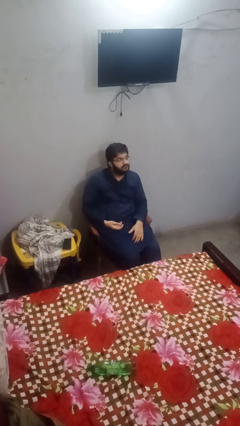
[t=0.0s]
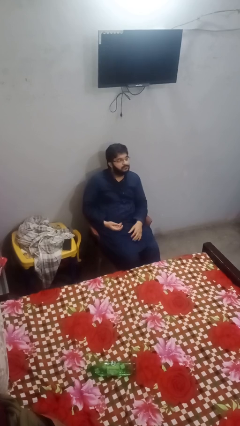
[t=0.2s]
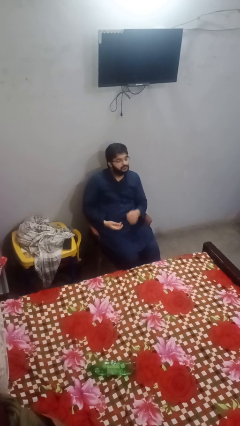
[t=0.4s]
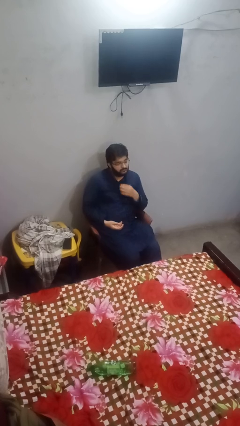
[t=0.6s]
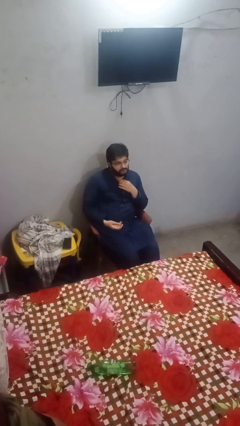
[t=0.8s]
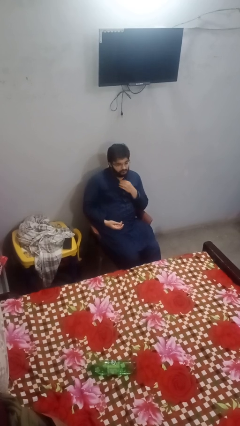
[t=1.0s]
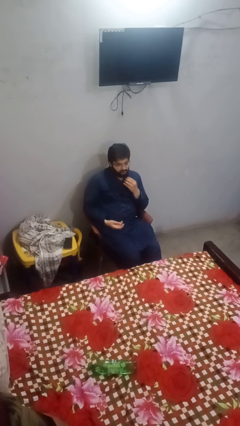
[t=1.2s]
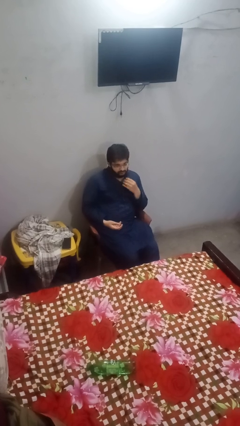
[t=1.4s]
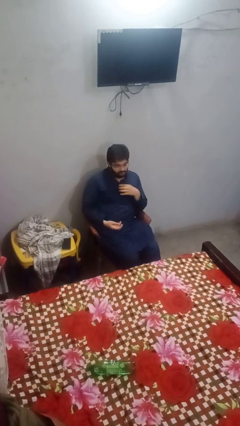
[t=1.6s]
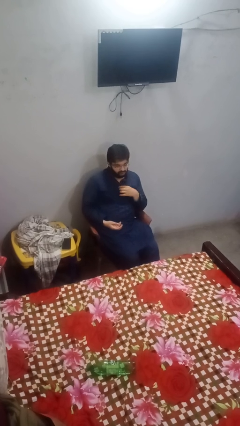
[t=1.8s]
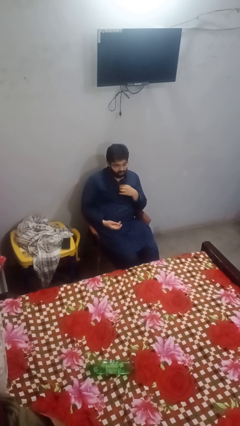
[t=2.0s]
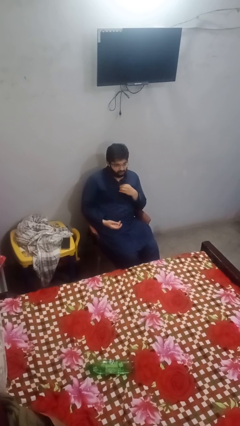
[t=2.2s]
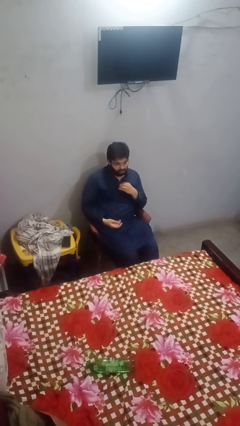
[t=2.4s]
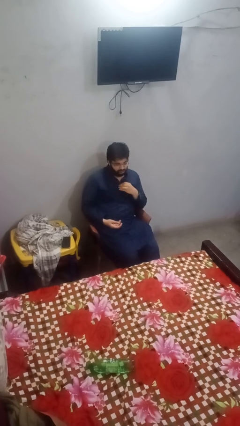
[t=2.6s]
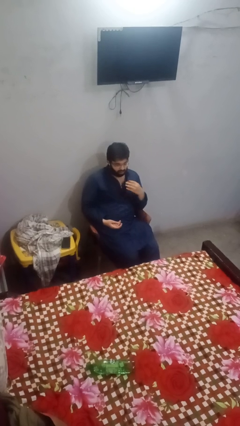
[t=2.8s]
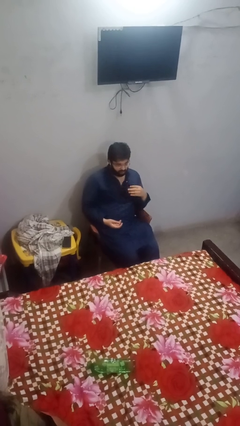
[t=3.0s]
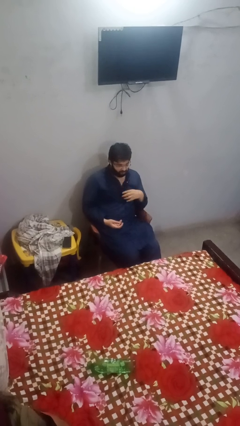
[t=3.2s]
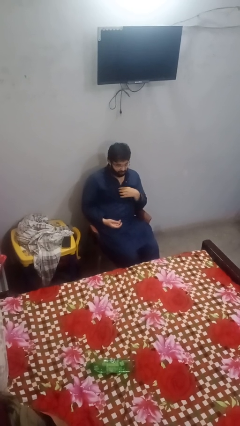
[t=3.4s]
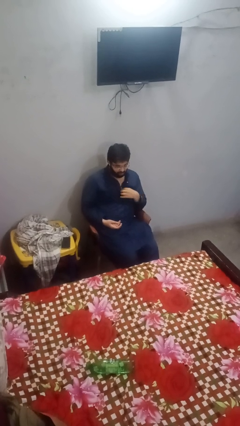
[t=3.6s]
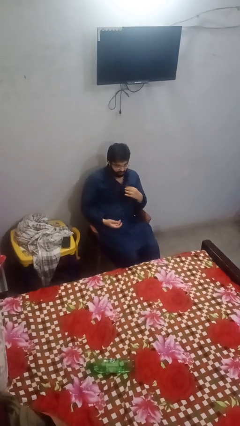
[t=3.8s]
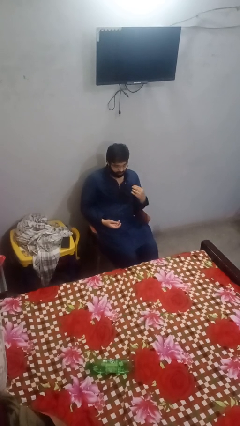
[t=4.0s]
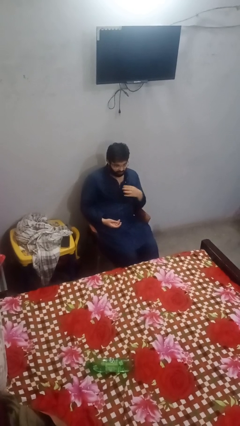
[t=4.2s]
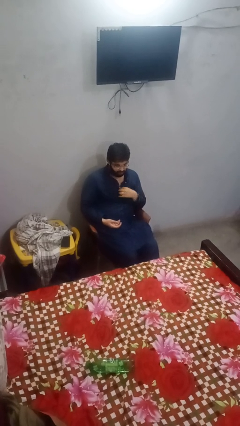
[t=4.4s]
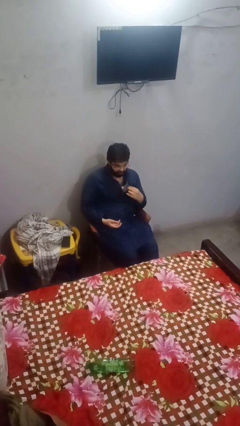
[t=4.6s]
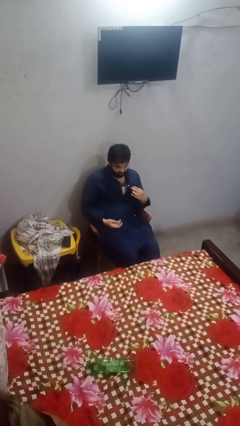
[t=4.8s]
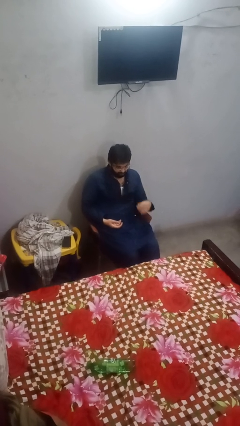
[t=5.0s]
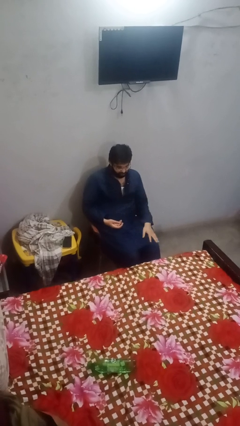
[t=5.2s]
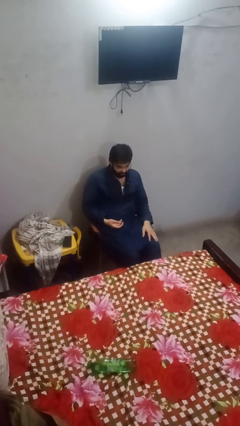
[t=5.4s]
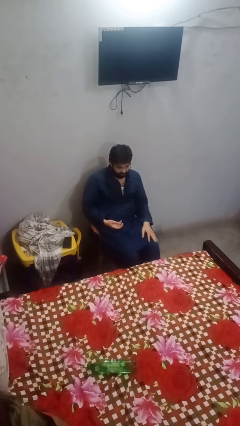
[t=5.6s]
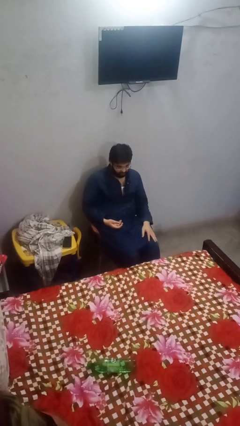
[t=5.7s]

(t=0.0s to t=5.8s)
person unbuttons shirt

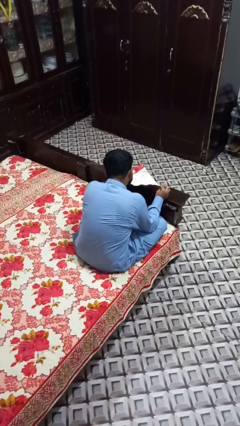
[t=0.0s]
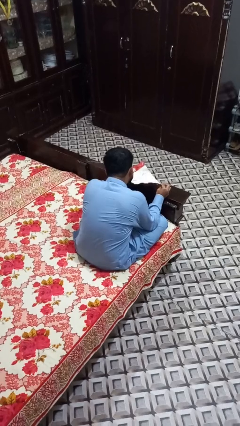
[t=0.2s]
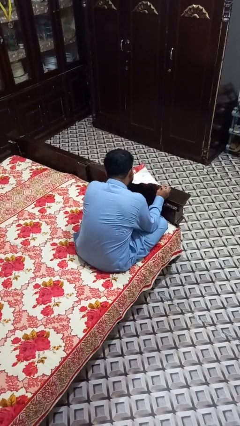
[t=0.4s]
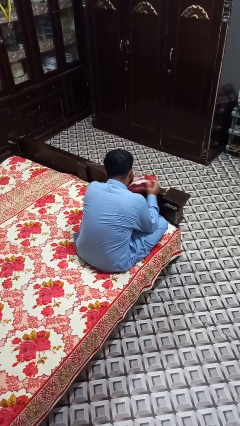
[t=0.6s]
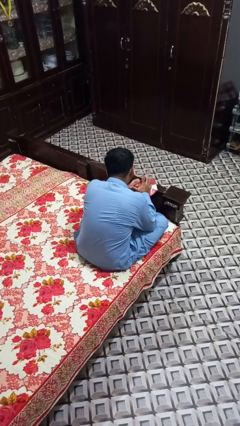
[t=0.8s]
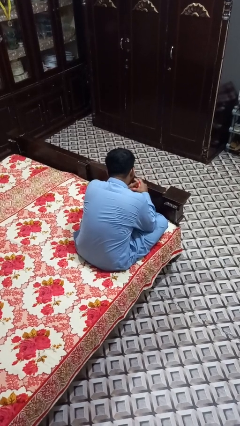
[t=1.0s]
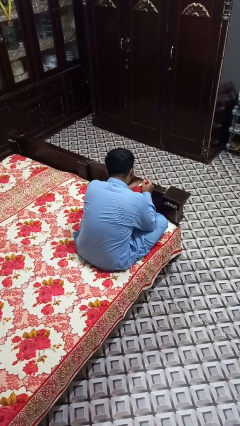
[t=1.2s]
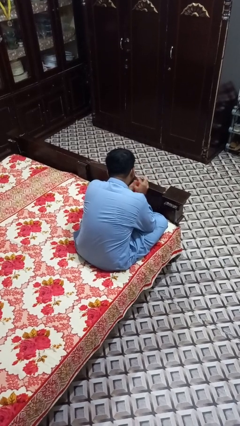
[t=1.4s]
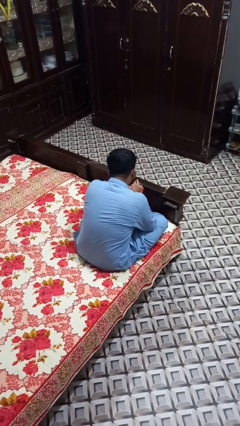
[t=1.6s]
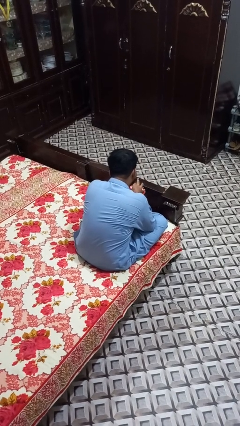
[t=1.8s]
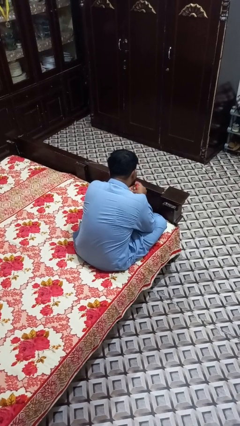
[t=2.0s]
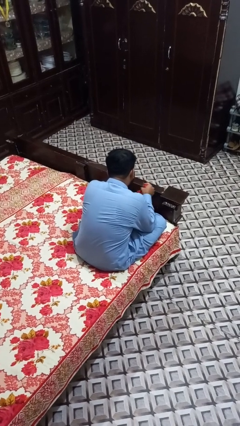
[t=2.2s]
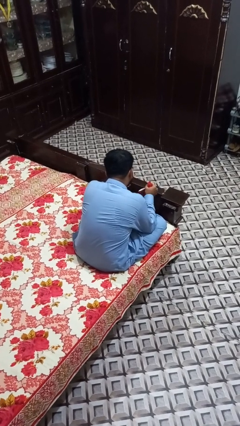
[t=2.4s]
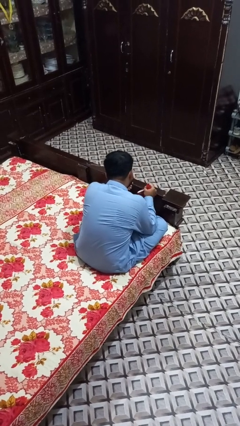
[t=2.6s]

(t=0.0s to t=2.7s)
person crumples paper

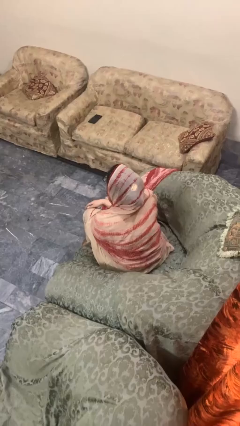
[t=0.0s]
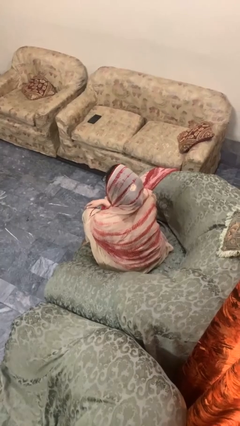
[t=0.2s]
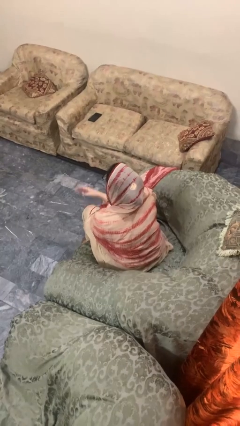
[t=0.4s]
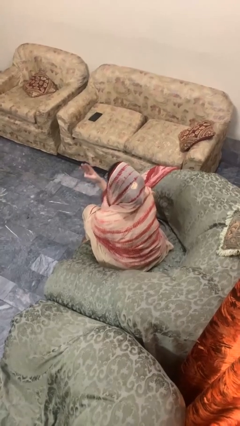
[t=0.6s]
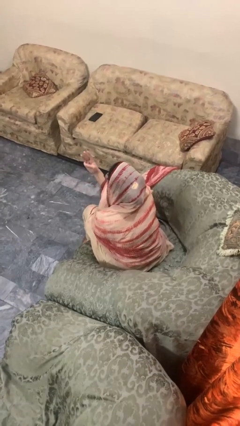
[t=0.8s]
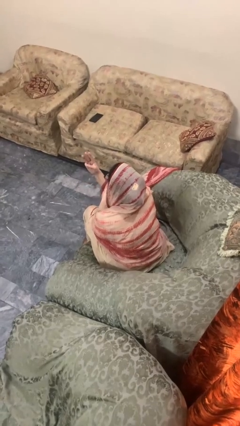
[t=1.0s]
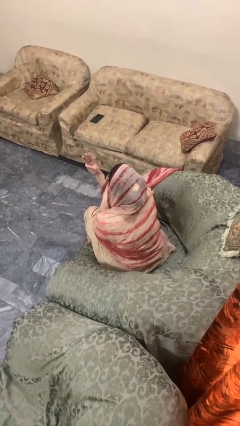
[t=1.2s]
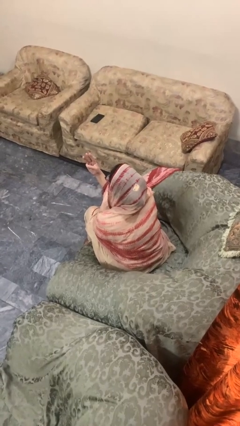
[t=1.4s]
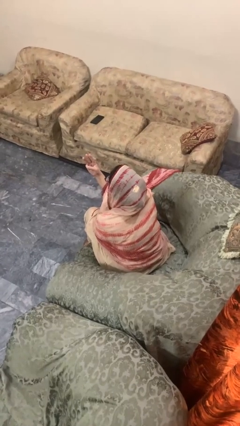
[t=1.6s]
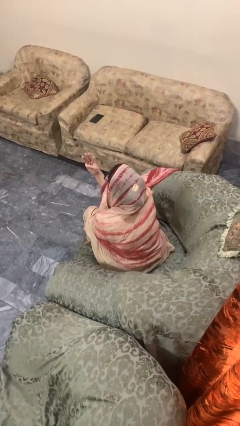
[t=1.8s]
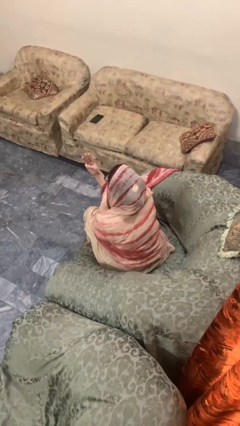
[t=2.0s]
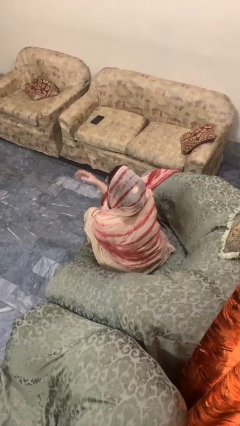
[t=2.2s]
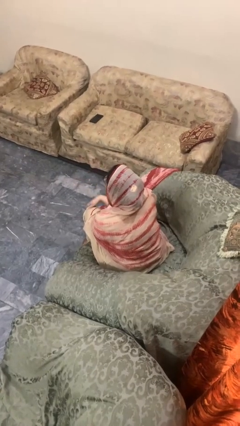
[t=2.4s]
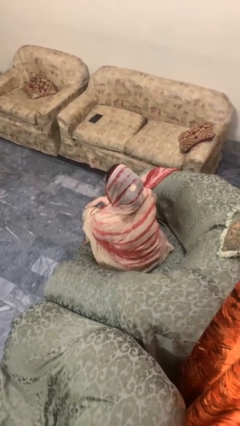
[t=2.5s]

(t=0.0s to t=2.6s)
person gestures number three

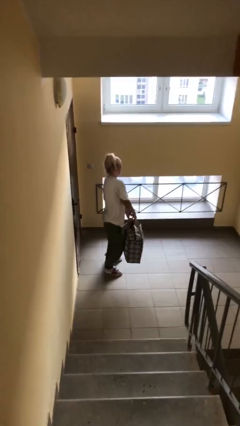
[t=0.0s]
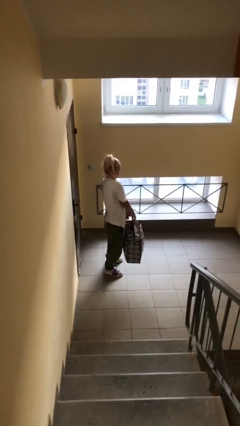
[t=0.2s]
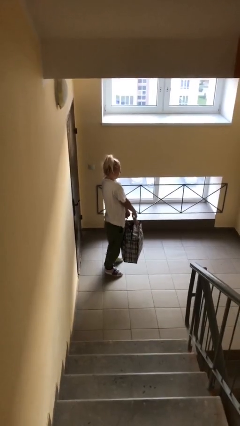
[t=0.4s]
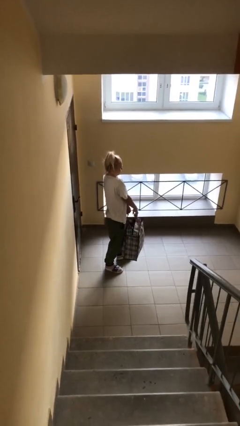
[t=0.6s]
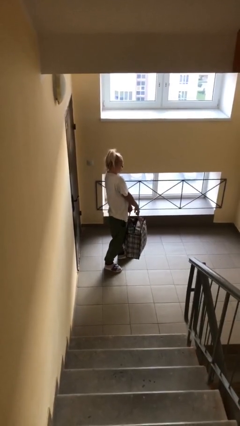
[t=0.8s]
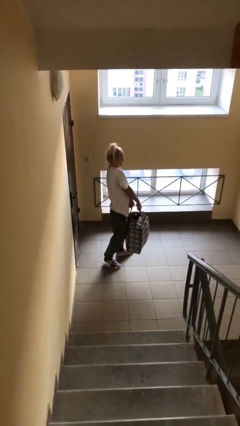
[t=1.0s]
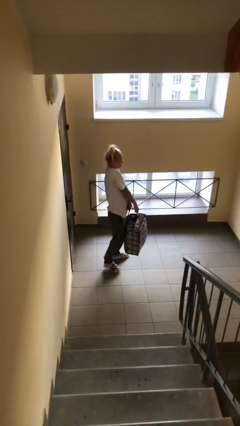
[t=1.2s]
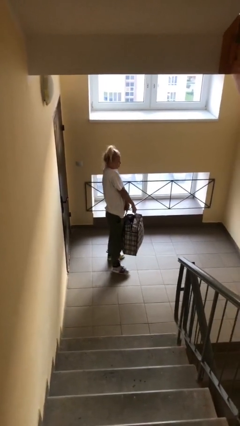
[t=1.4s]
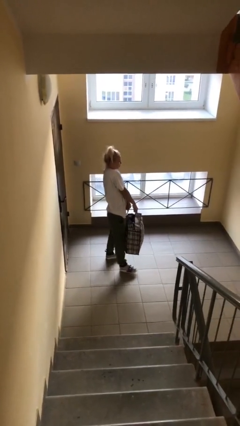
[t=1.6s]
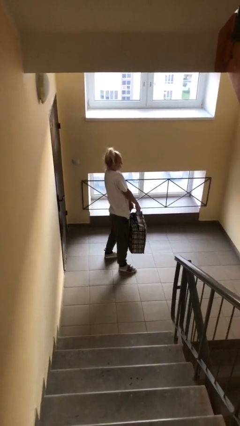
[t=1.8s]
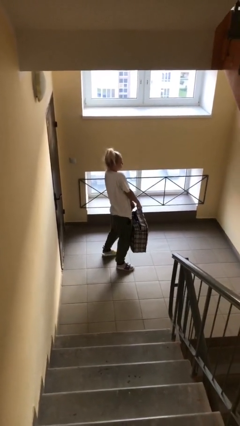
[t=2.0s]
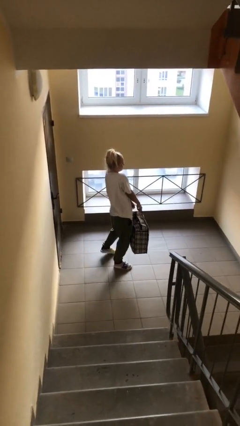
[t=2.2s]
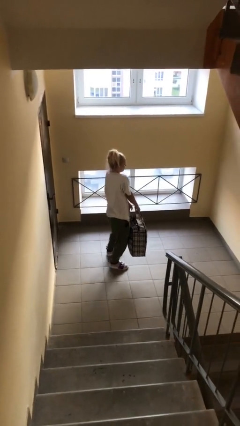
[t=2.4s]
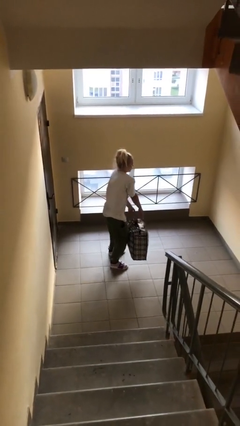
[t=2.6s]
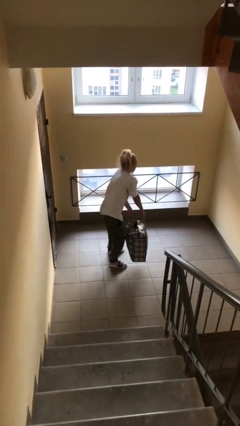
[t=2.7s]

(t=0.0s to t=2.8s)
person carries heavy object

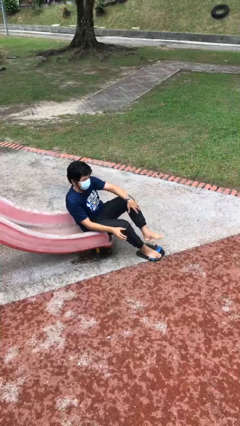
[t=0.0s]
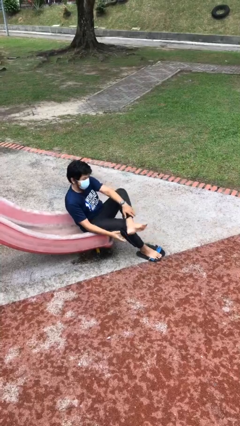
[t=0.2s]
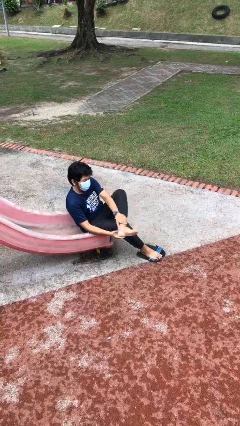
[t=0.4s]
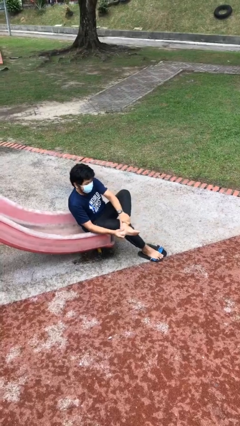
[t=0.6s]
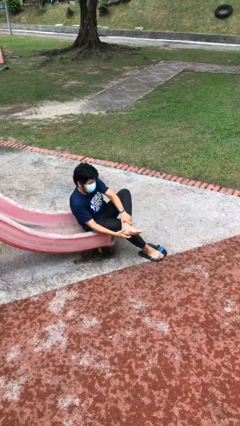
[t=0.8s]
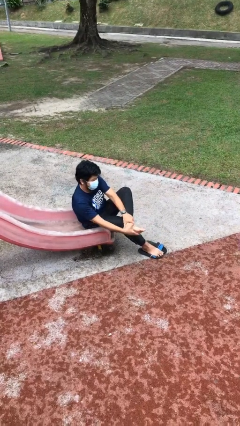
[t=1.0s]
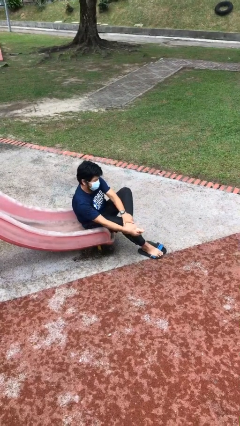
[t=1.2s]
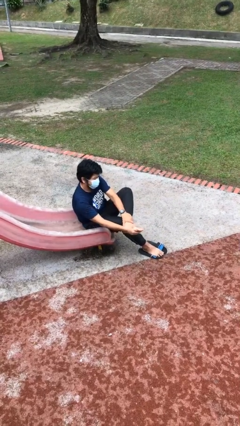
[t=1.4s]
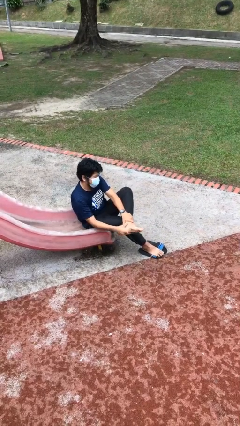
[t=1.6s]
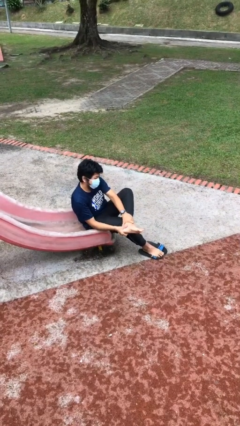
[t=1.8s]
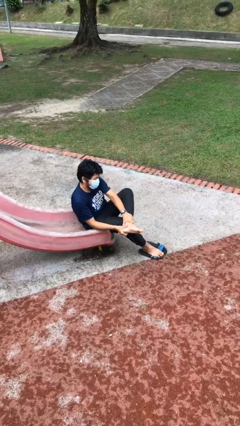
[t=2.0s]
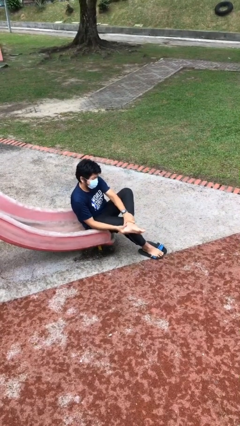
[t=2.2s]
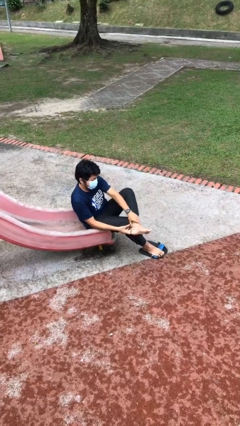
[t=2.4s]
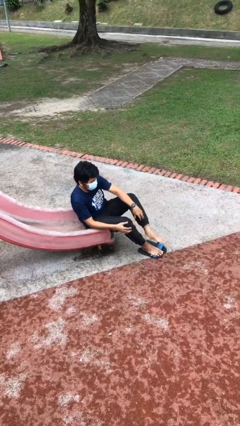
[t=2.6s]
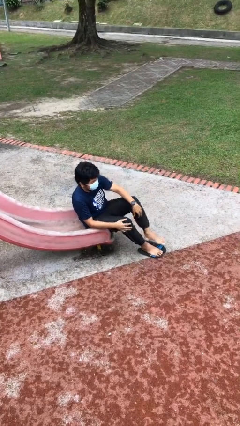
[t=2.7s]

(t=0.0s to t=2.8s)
person rubs foot

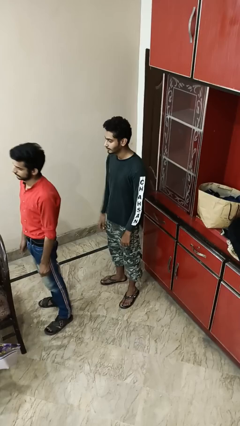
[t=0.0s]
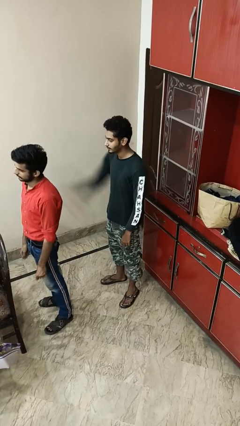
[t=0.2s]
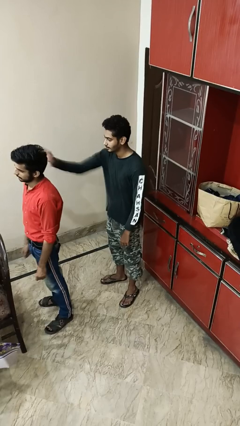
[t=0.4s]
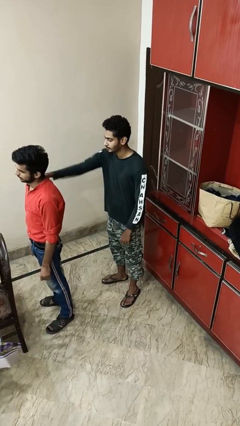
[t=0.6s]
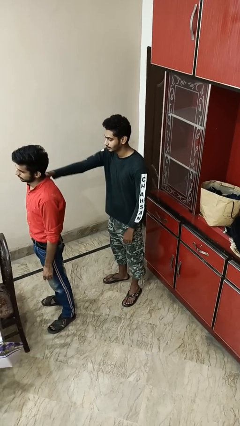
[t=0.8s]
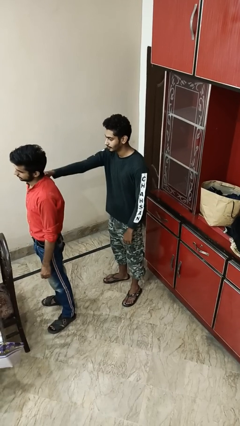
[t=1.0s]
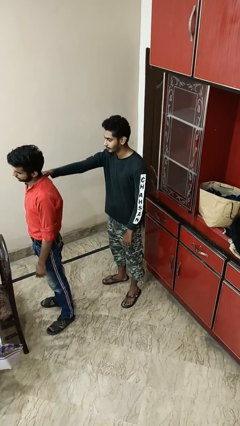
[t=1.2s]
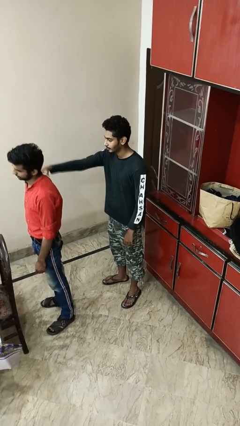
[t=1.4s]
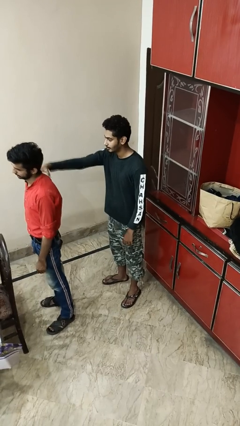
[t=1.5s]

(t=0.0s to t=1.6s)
person grabs person by shoulder
